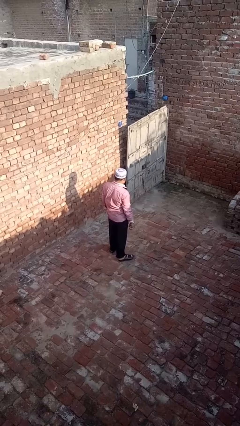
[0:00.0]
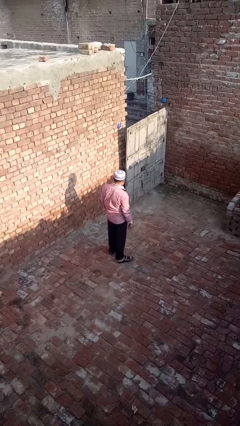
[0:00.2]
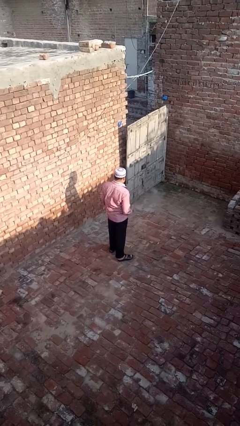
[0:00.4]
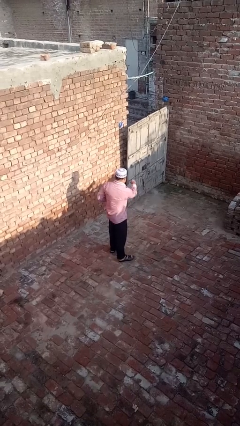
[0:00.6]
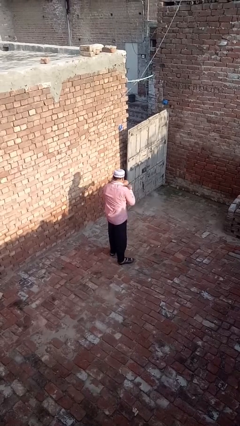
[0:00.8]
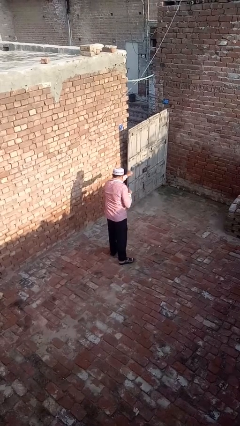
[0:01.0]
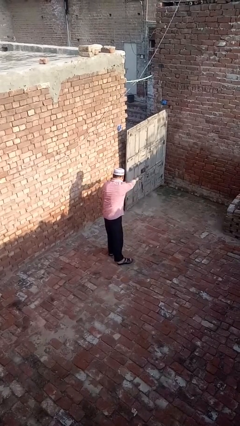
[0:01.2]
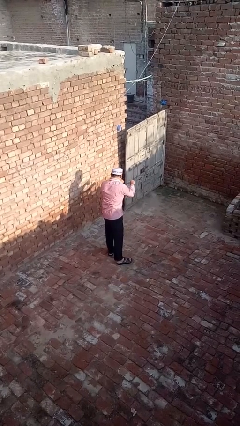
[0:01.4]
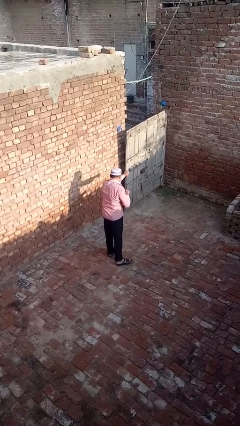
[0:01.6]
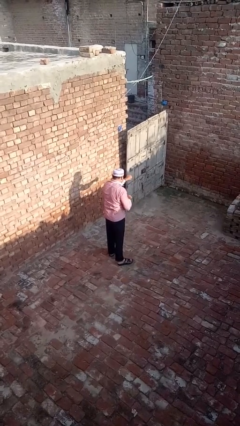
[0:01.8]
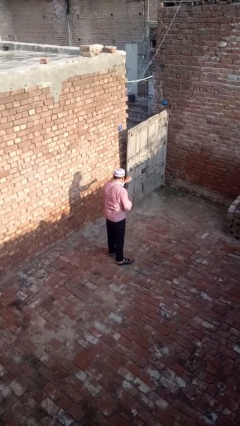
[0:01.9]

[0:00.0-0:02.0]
person punches

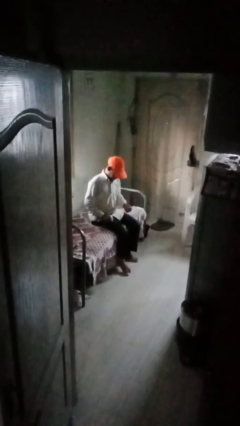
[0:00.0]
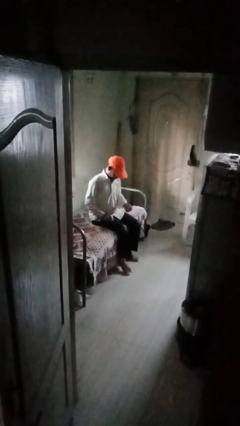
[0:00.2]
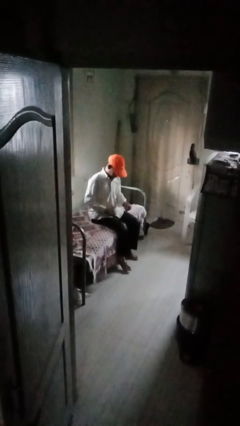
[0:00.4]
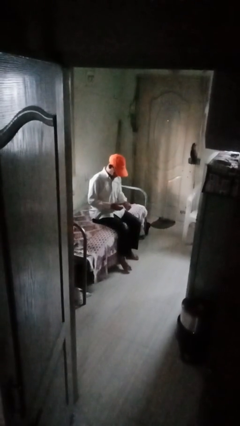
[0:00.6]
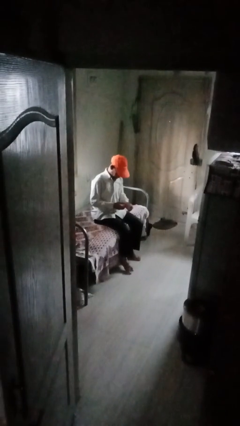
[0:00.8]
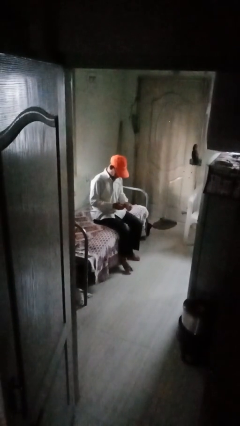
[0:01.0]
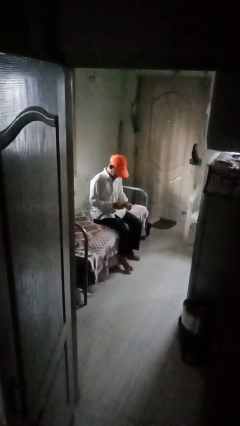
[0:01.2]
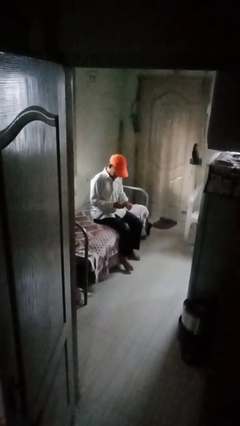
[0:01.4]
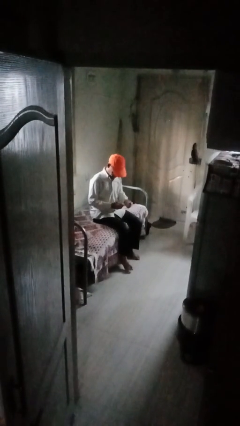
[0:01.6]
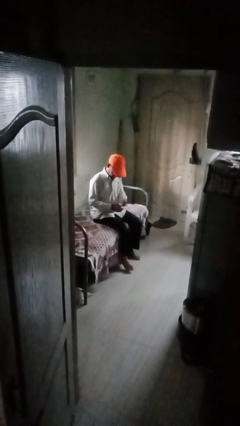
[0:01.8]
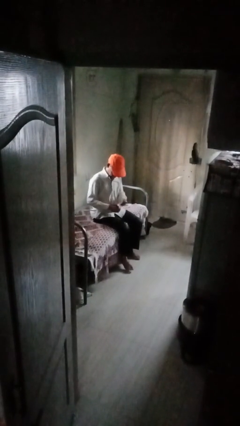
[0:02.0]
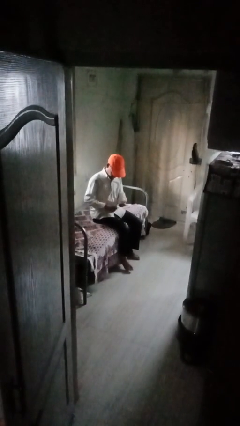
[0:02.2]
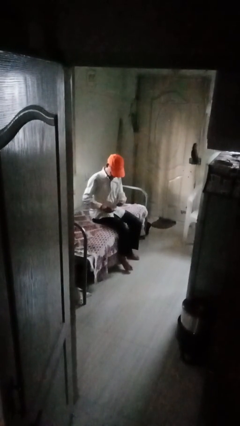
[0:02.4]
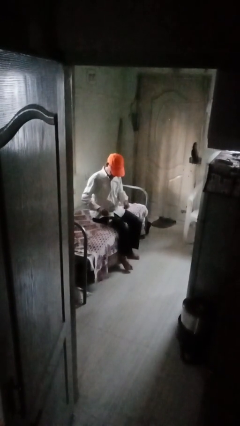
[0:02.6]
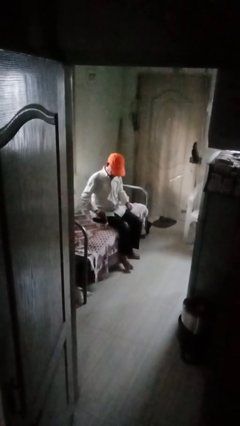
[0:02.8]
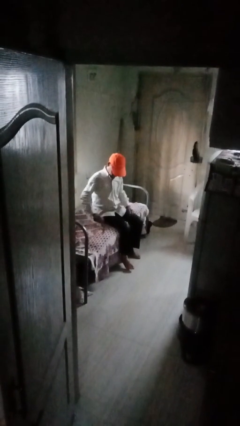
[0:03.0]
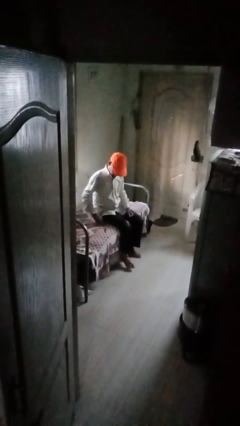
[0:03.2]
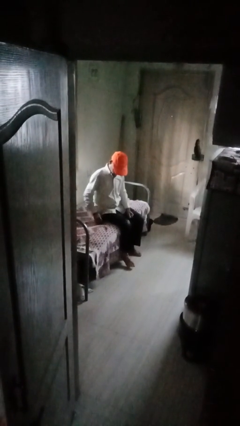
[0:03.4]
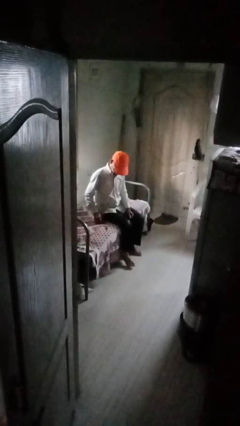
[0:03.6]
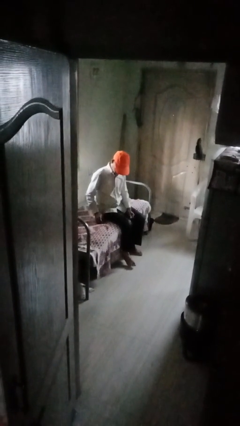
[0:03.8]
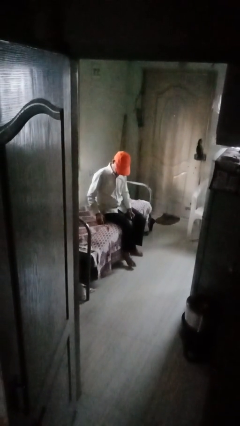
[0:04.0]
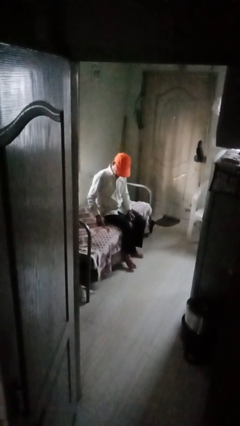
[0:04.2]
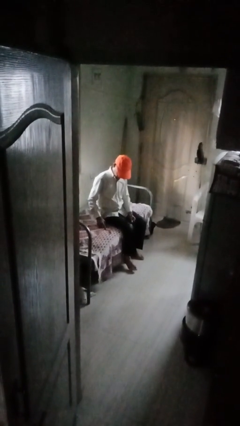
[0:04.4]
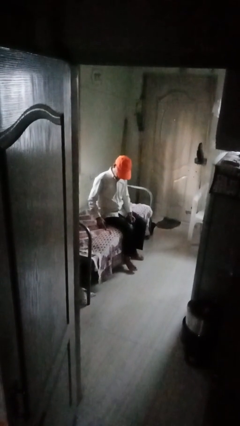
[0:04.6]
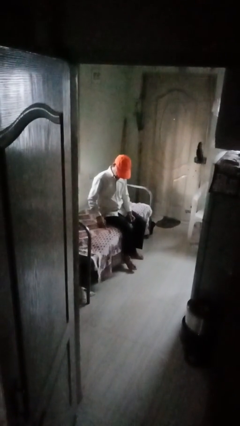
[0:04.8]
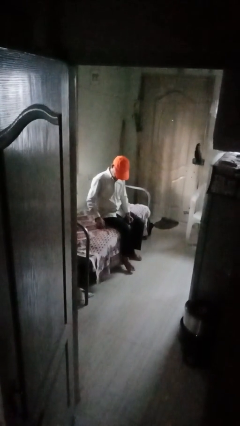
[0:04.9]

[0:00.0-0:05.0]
person takes off wristwatch

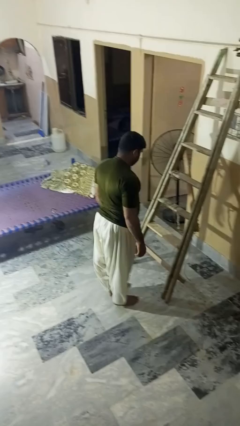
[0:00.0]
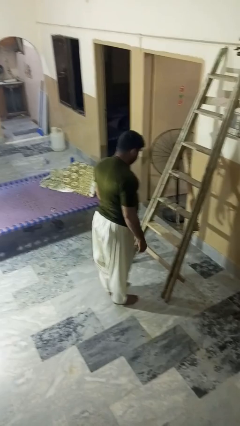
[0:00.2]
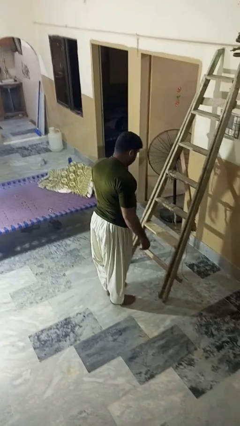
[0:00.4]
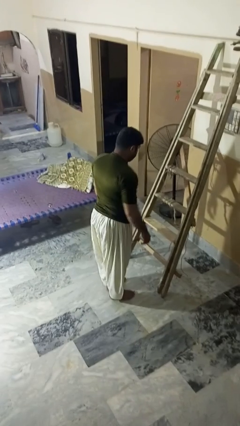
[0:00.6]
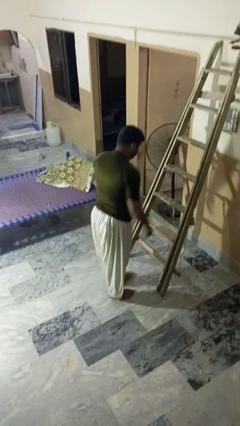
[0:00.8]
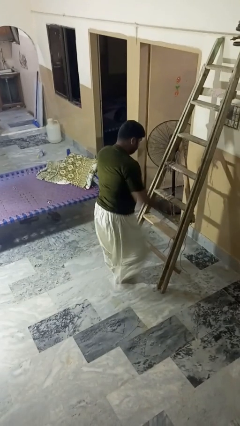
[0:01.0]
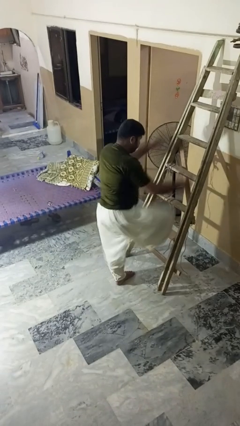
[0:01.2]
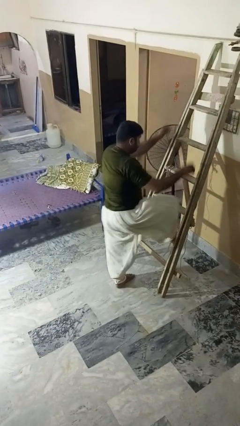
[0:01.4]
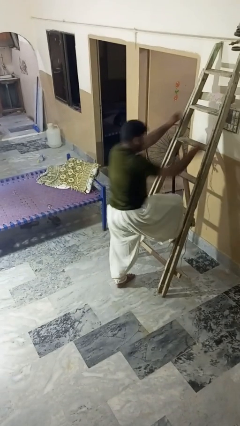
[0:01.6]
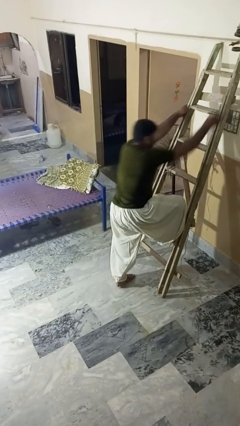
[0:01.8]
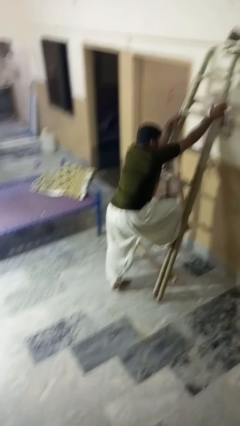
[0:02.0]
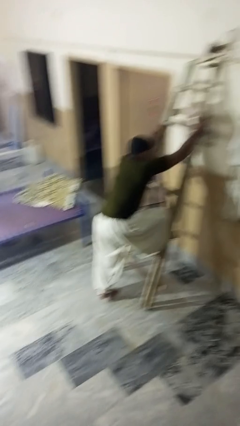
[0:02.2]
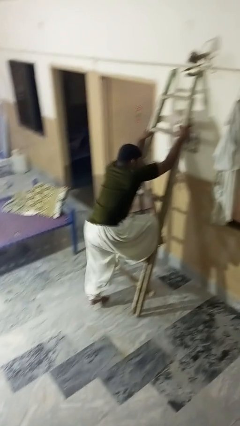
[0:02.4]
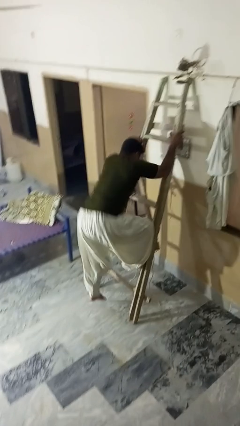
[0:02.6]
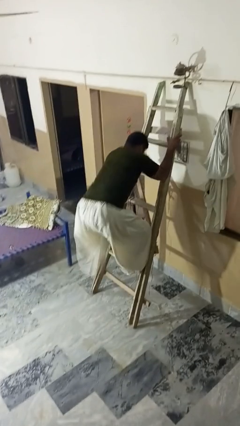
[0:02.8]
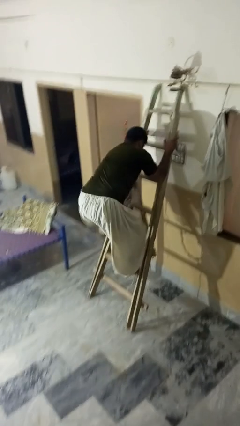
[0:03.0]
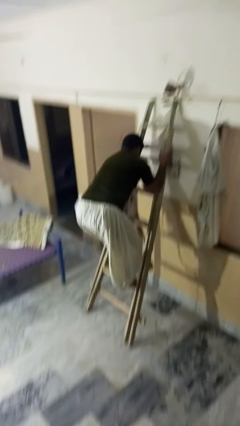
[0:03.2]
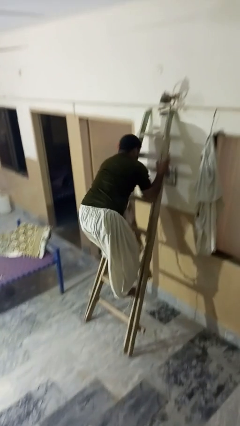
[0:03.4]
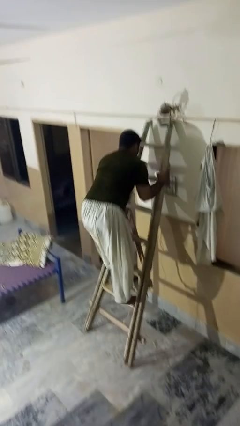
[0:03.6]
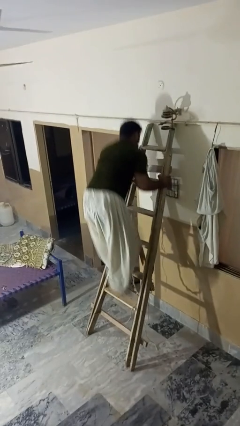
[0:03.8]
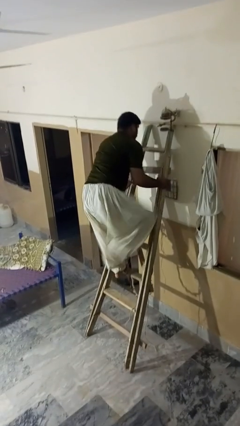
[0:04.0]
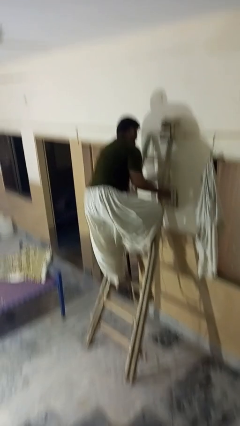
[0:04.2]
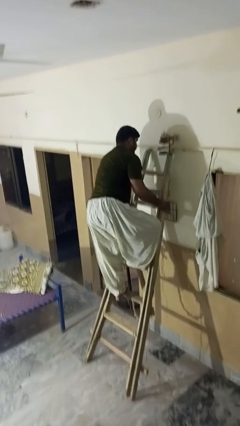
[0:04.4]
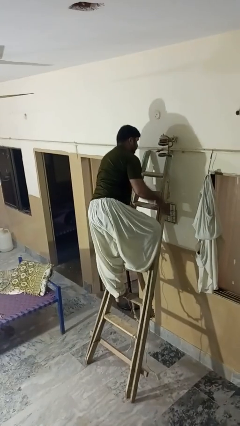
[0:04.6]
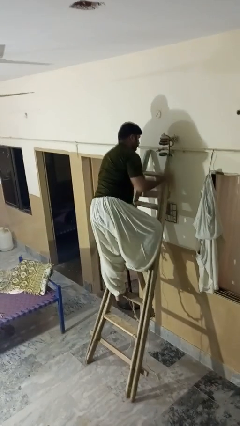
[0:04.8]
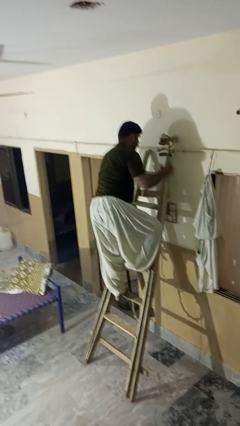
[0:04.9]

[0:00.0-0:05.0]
person climbs up ladder

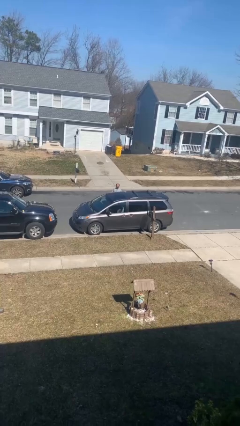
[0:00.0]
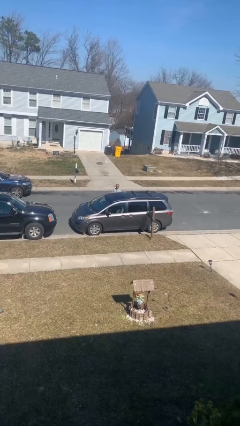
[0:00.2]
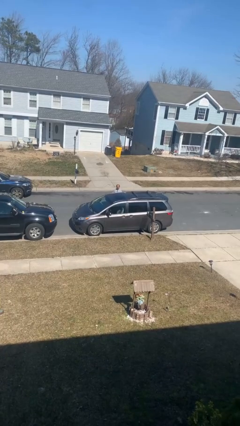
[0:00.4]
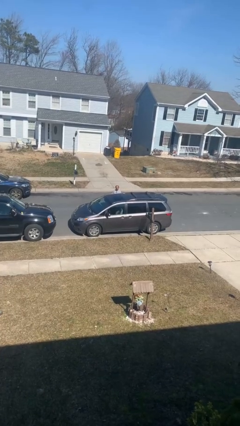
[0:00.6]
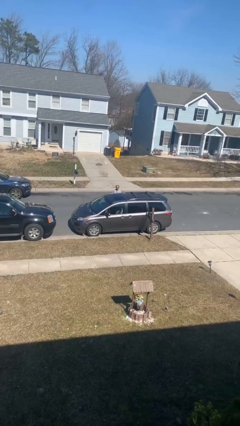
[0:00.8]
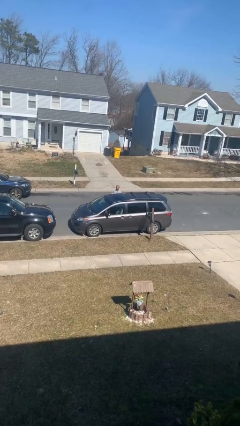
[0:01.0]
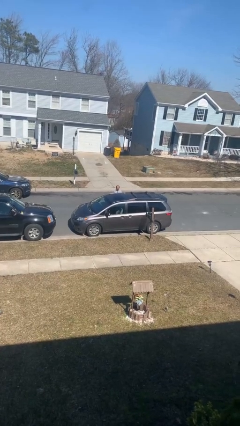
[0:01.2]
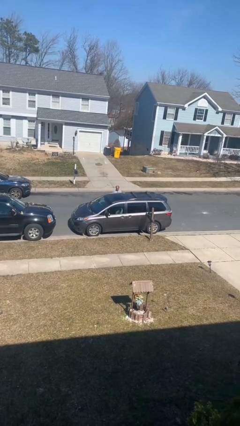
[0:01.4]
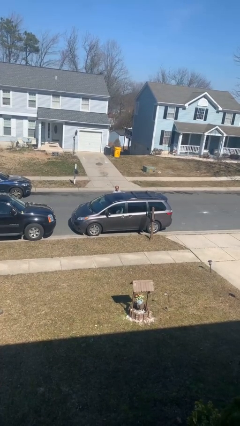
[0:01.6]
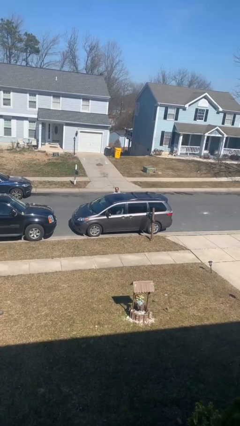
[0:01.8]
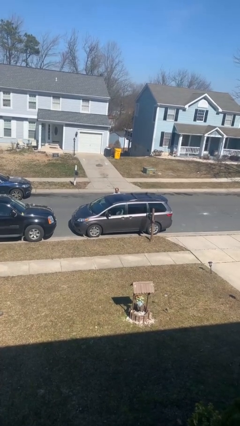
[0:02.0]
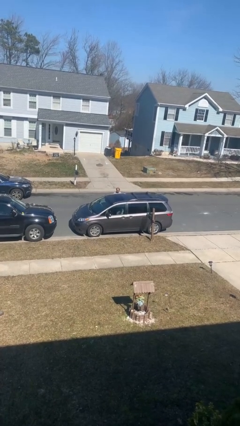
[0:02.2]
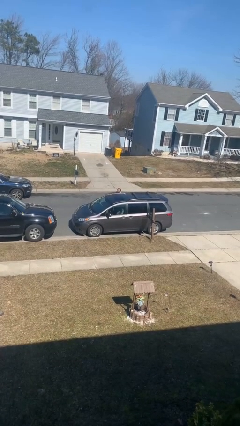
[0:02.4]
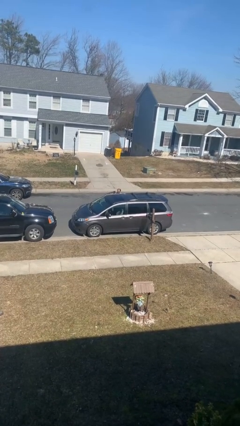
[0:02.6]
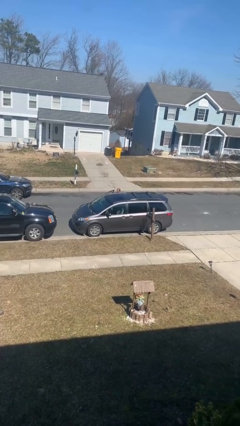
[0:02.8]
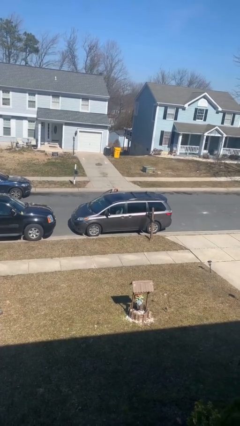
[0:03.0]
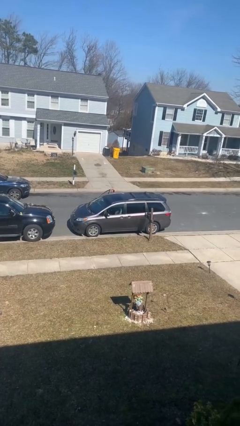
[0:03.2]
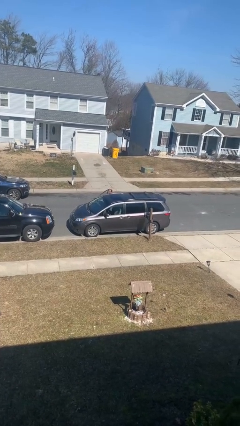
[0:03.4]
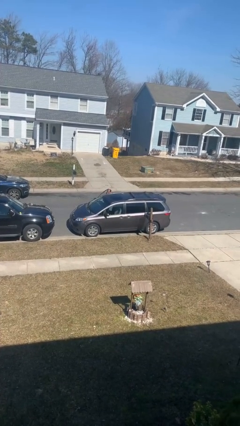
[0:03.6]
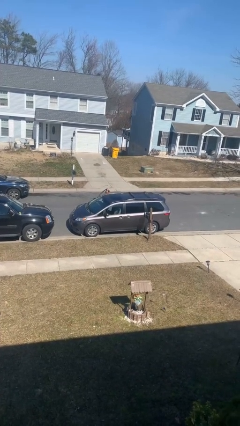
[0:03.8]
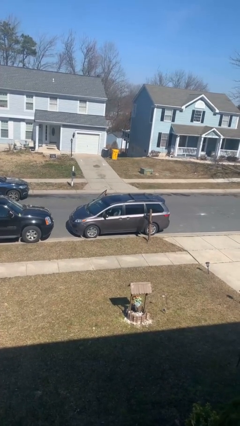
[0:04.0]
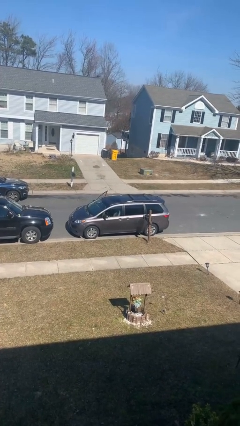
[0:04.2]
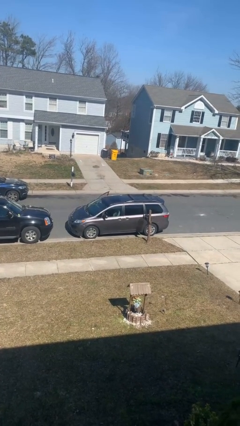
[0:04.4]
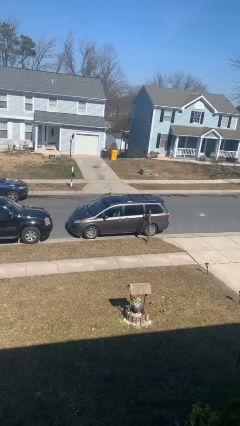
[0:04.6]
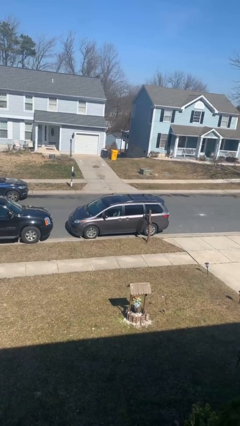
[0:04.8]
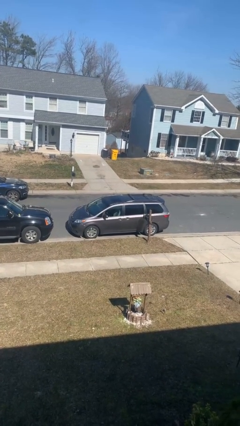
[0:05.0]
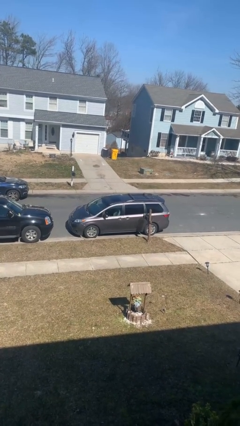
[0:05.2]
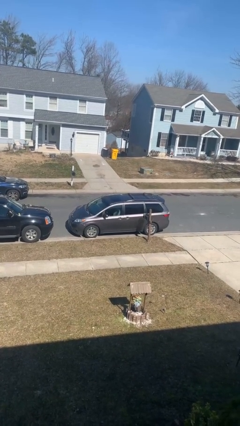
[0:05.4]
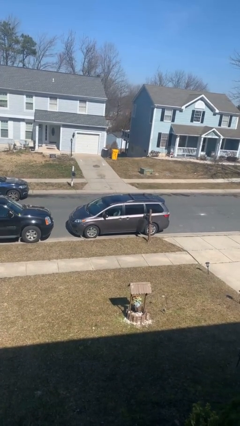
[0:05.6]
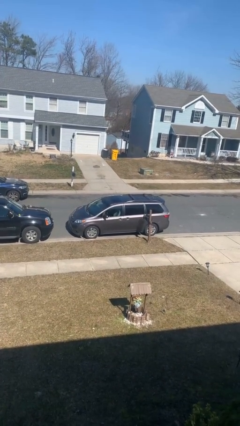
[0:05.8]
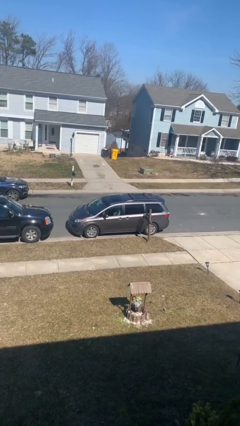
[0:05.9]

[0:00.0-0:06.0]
car picks up person
